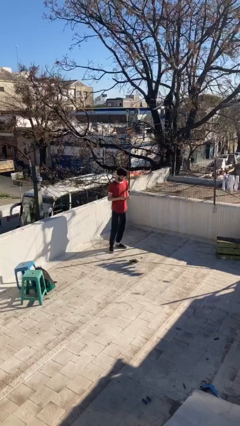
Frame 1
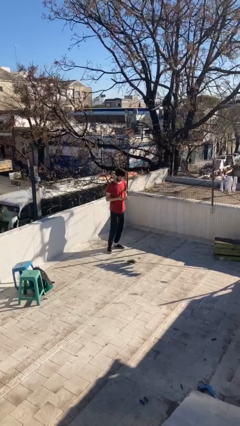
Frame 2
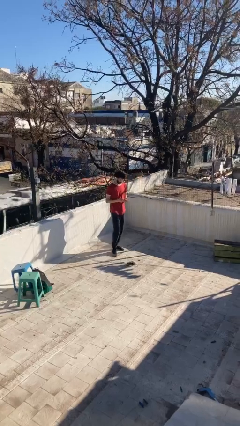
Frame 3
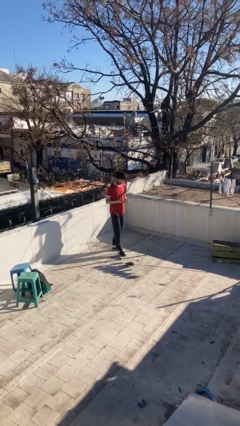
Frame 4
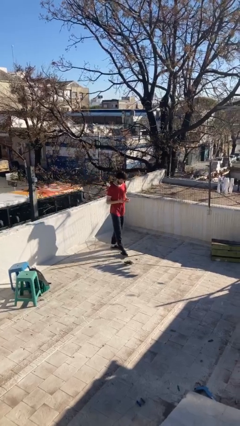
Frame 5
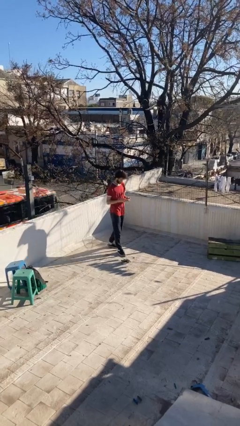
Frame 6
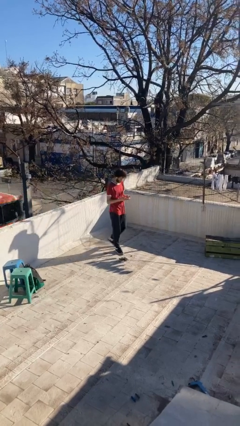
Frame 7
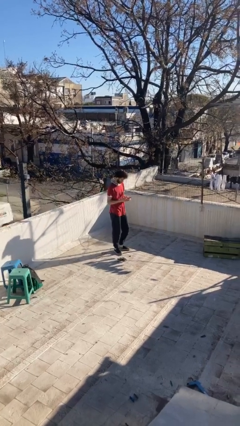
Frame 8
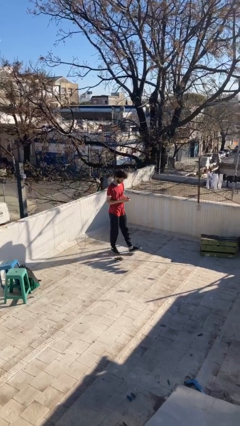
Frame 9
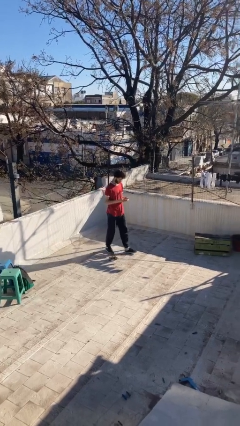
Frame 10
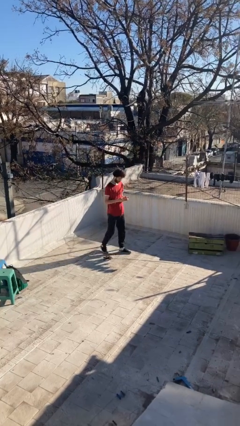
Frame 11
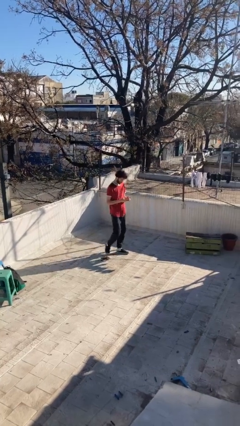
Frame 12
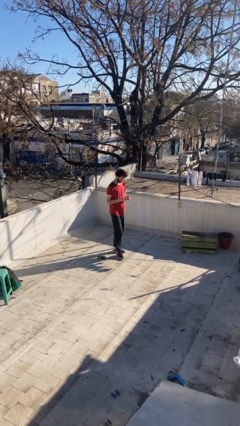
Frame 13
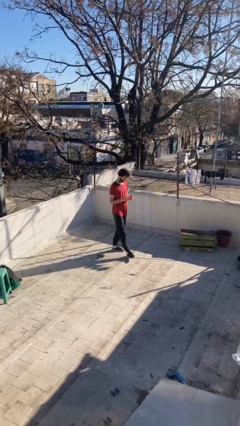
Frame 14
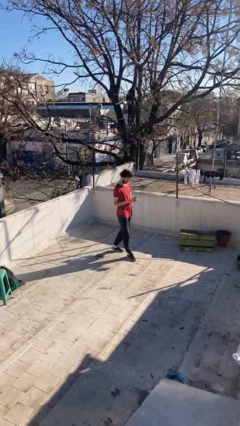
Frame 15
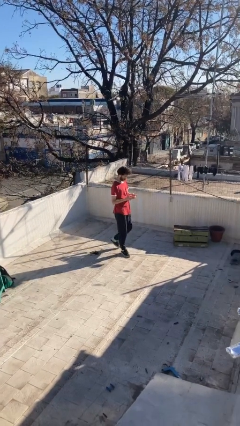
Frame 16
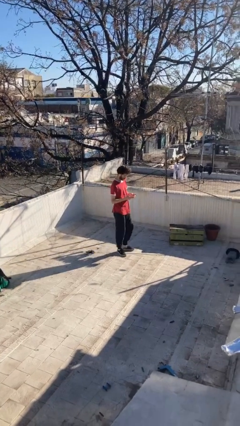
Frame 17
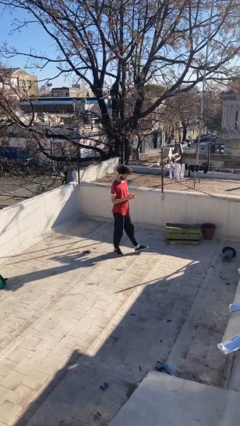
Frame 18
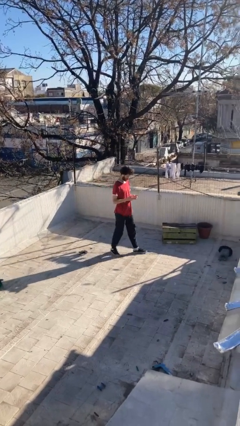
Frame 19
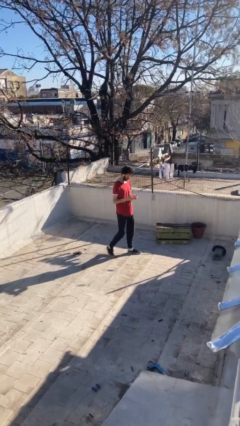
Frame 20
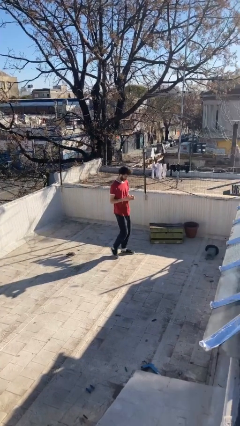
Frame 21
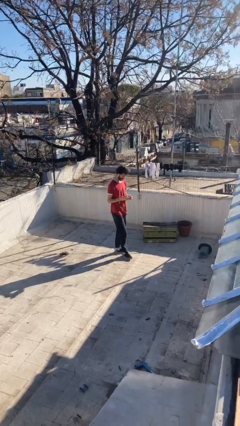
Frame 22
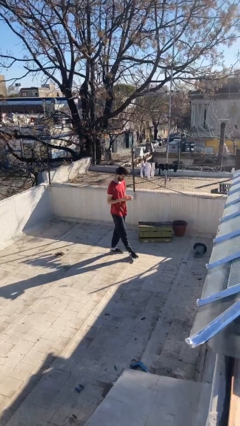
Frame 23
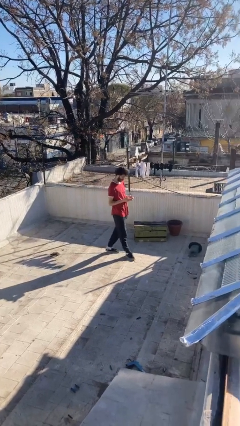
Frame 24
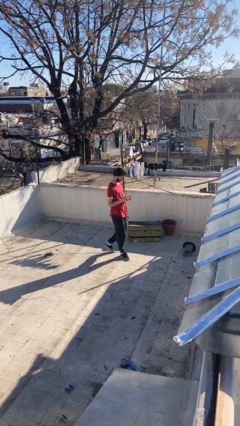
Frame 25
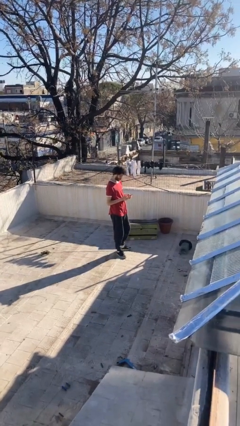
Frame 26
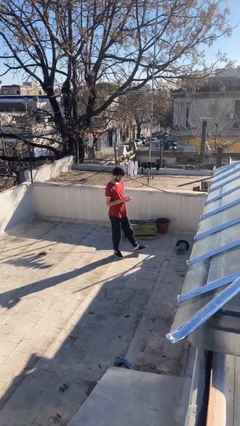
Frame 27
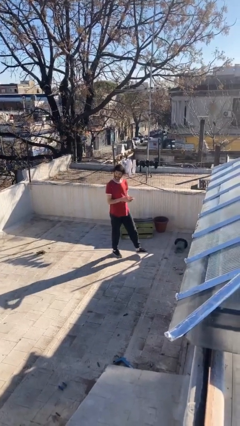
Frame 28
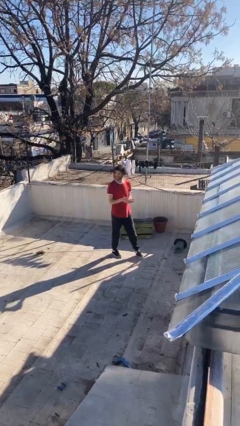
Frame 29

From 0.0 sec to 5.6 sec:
person texts on phone

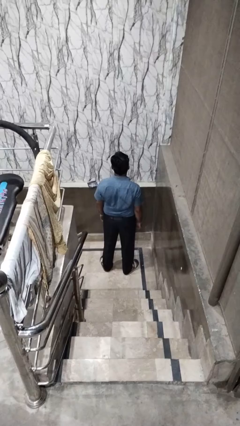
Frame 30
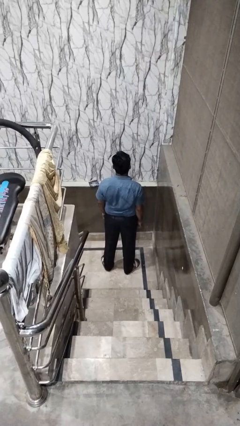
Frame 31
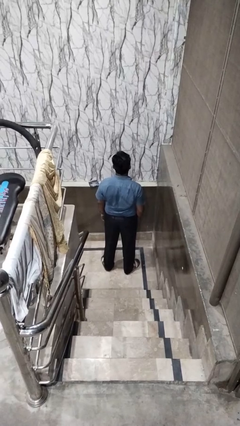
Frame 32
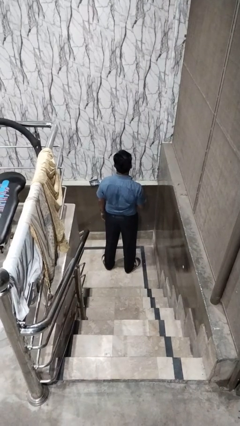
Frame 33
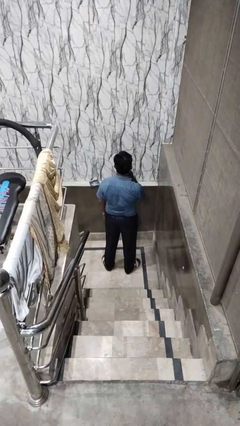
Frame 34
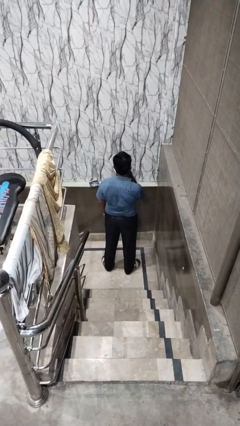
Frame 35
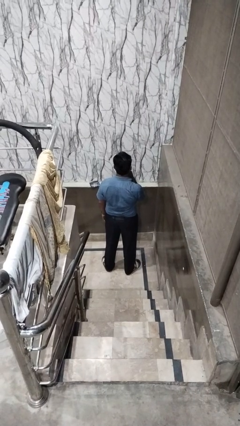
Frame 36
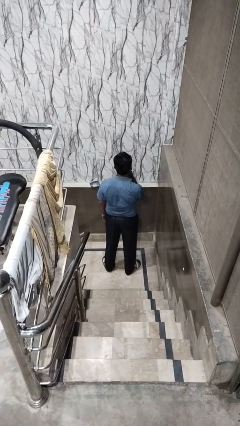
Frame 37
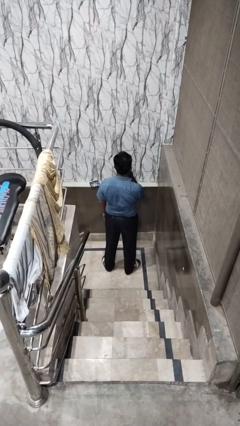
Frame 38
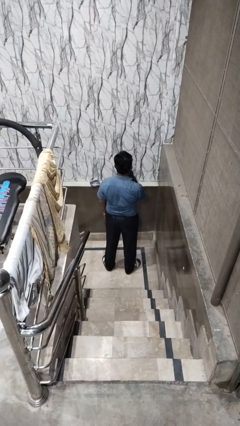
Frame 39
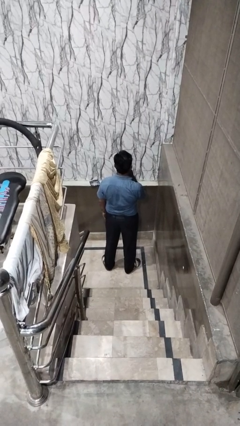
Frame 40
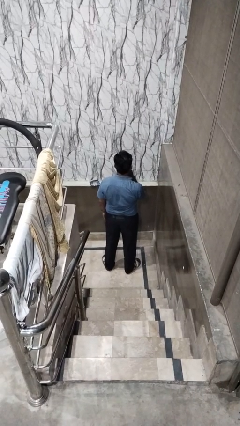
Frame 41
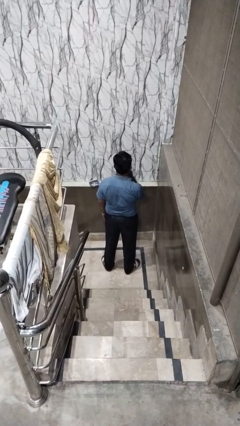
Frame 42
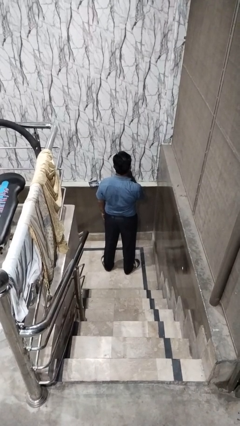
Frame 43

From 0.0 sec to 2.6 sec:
person strokes chin

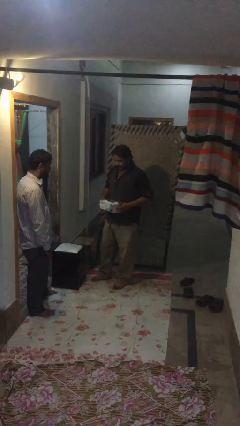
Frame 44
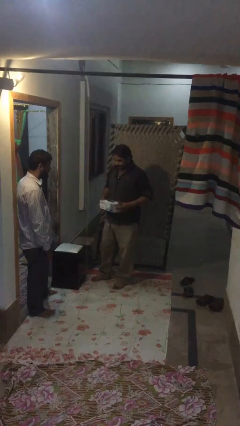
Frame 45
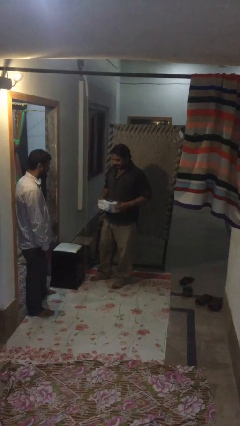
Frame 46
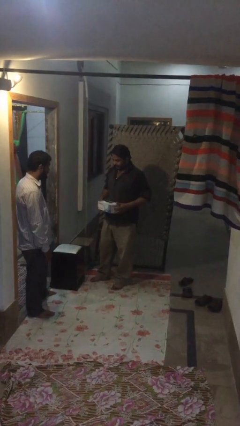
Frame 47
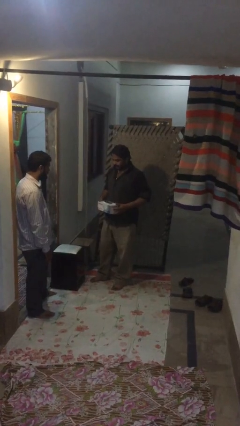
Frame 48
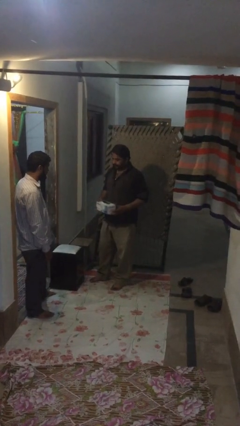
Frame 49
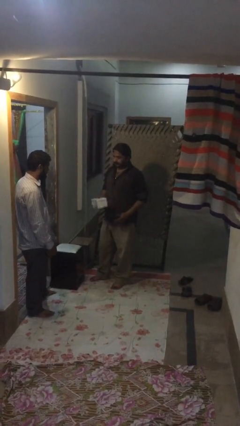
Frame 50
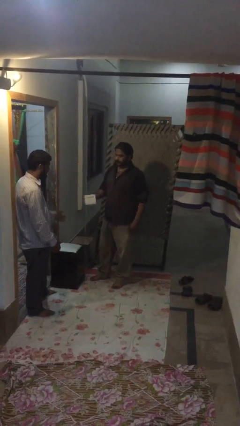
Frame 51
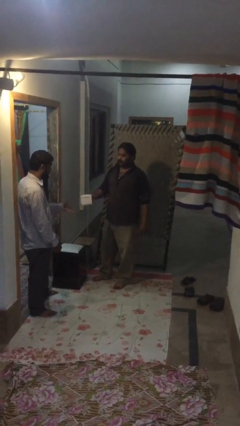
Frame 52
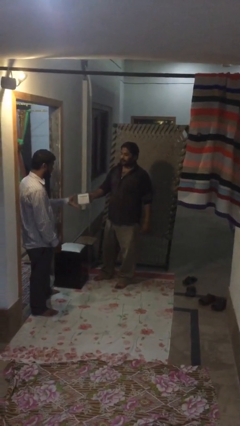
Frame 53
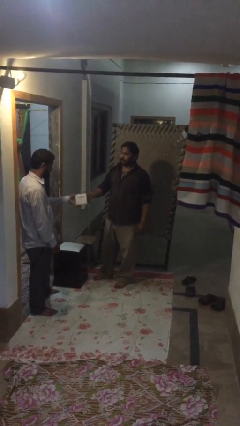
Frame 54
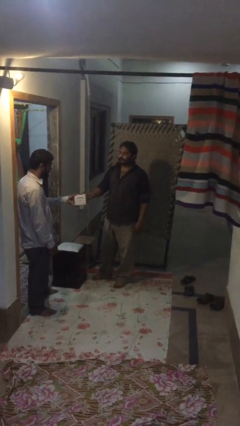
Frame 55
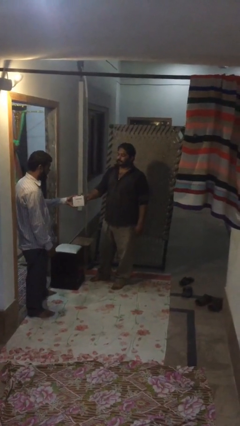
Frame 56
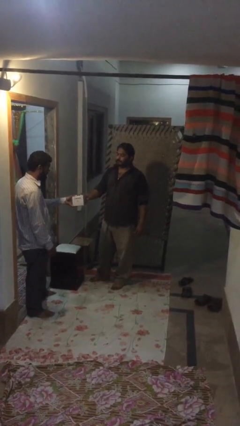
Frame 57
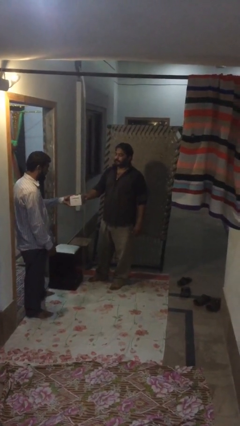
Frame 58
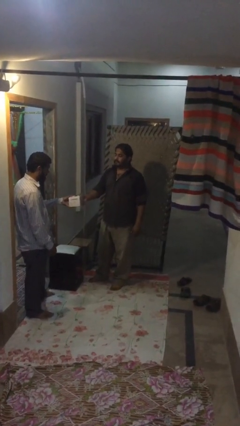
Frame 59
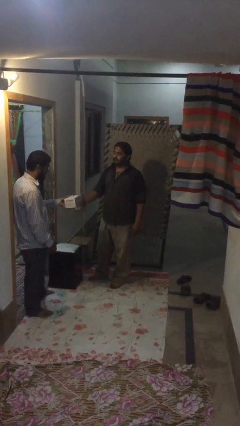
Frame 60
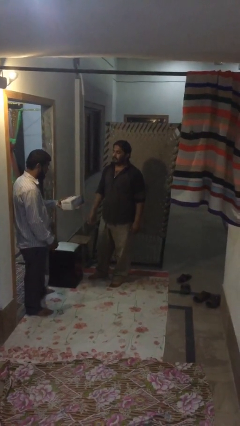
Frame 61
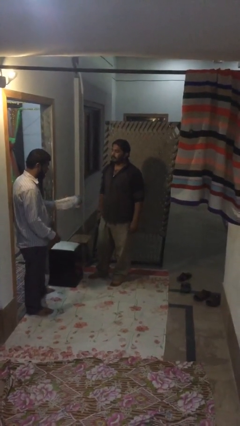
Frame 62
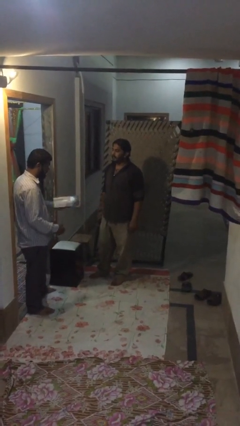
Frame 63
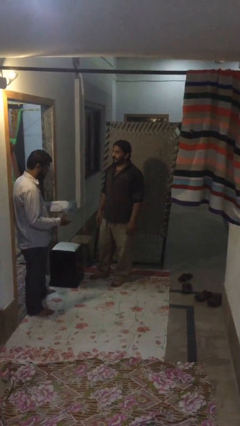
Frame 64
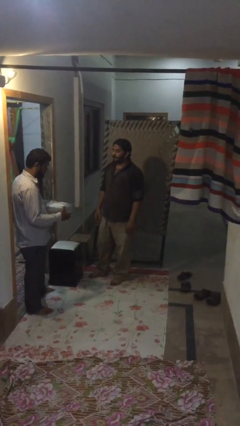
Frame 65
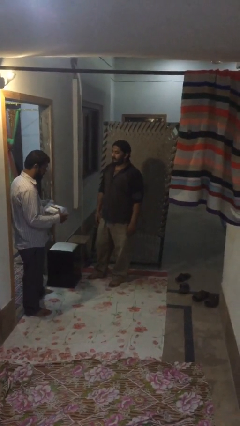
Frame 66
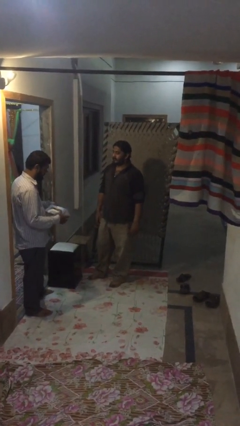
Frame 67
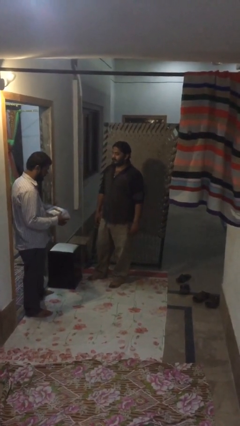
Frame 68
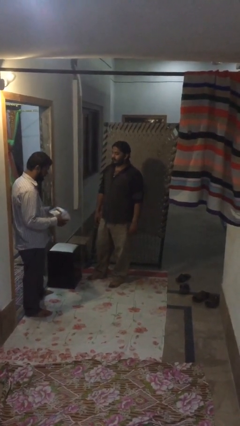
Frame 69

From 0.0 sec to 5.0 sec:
person transfers object to person

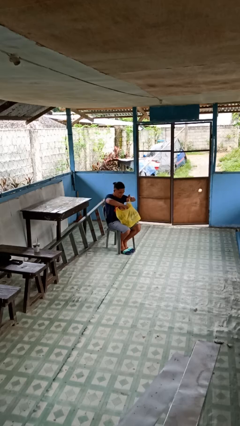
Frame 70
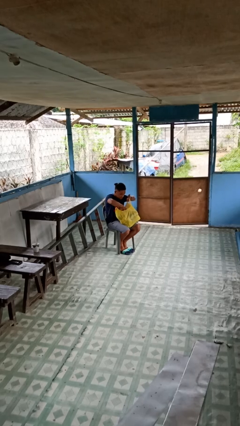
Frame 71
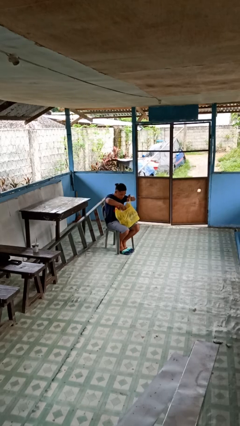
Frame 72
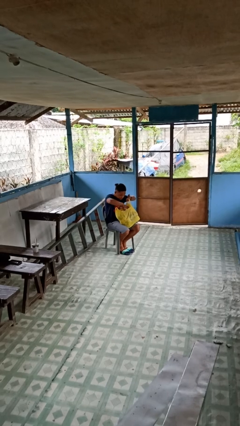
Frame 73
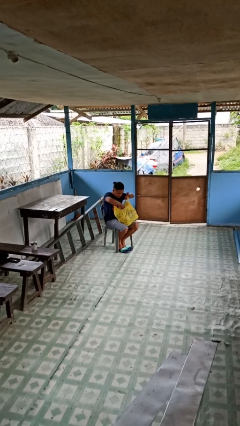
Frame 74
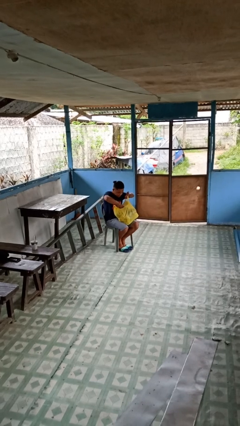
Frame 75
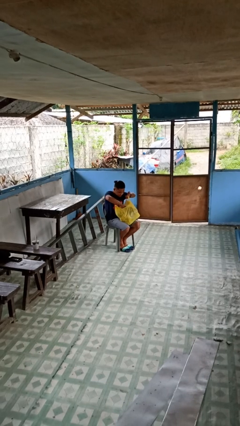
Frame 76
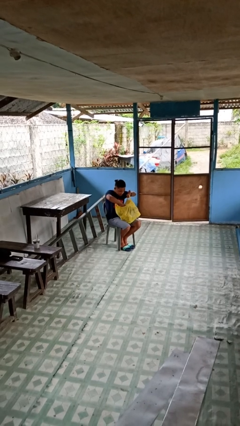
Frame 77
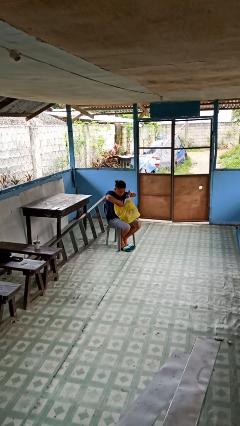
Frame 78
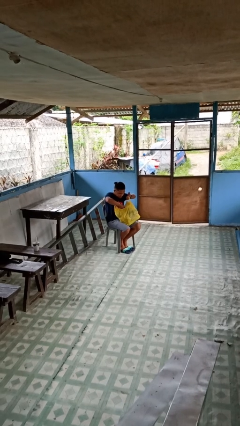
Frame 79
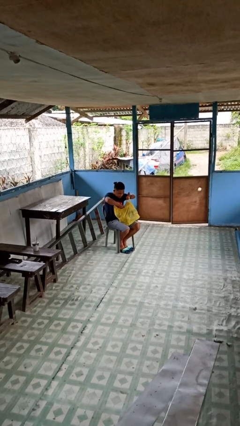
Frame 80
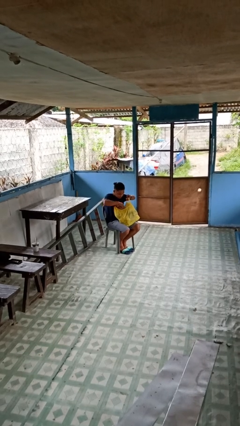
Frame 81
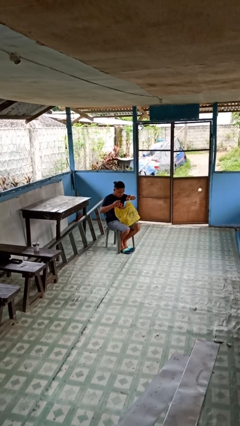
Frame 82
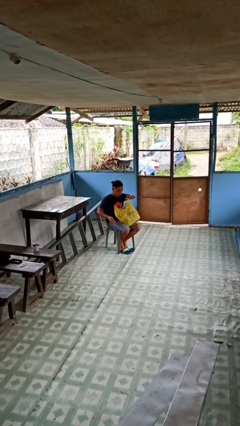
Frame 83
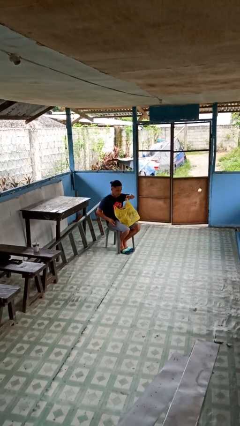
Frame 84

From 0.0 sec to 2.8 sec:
person searches in bag

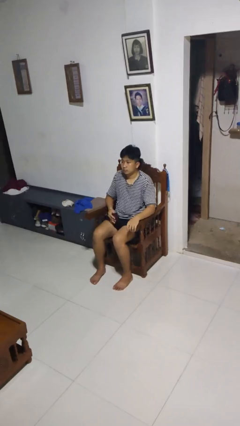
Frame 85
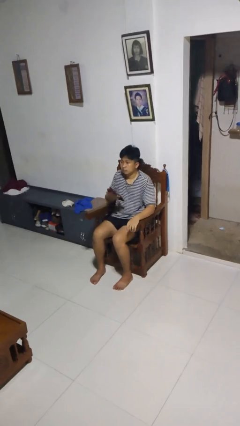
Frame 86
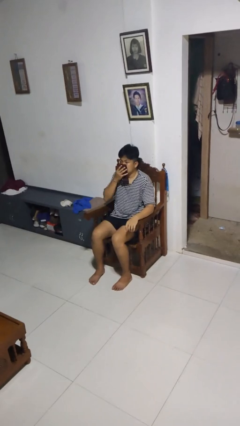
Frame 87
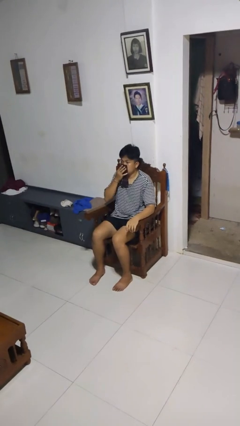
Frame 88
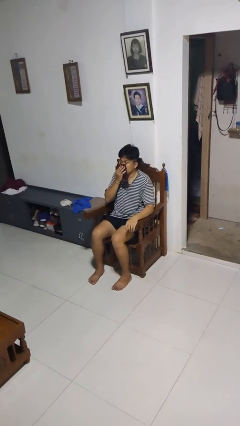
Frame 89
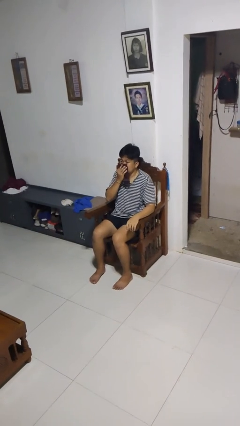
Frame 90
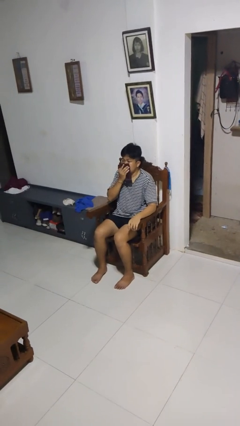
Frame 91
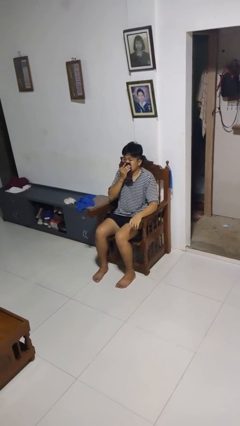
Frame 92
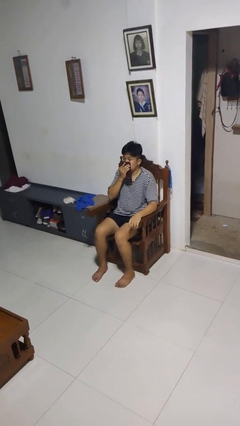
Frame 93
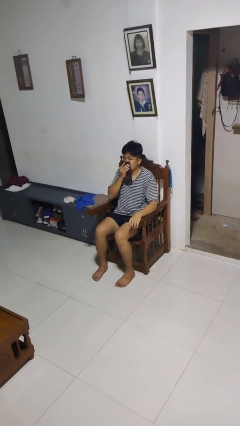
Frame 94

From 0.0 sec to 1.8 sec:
person blows nose
